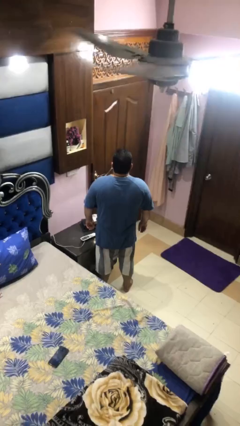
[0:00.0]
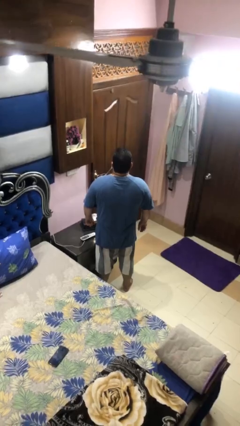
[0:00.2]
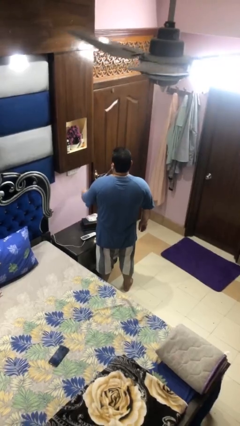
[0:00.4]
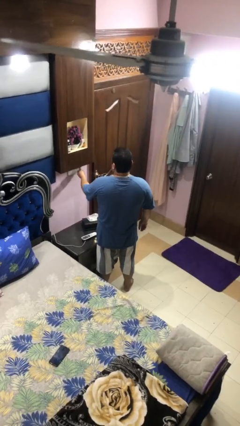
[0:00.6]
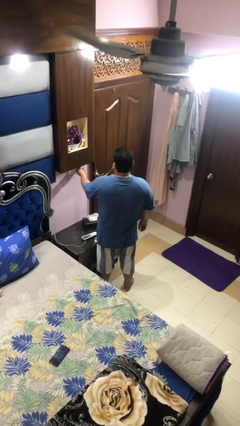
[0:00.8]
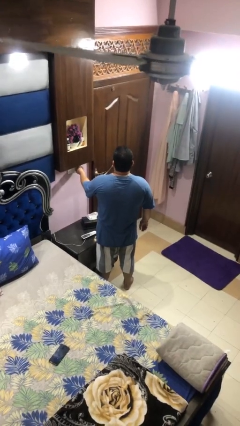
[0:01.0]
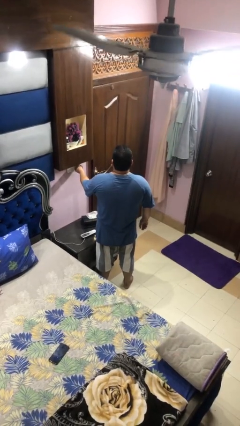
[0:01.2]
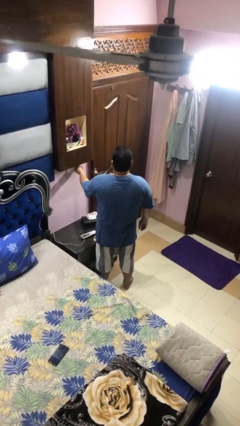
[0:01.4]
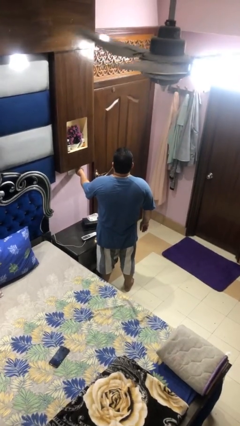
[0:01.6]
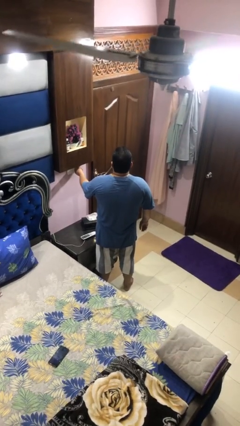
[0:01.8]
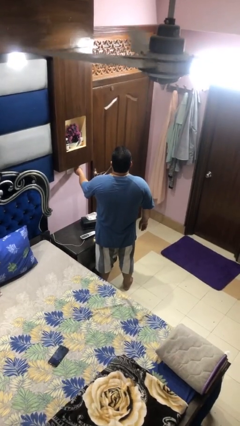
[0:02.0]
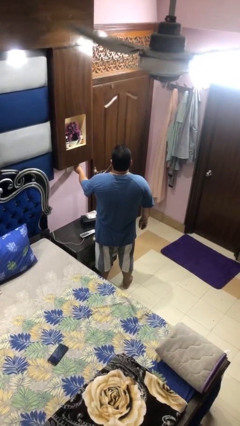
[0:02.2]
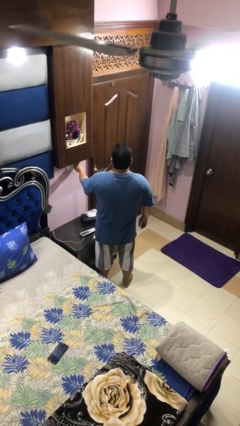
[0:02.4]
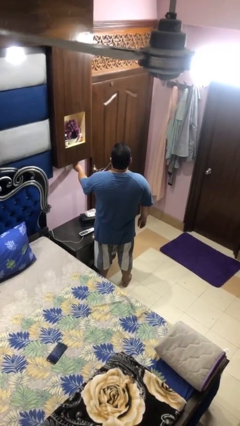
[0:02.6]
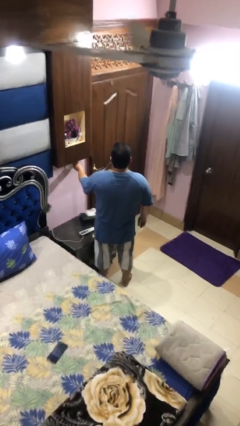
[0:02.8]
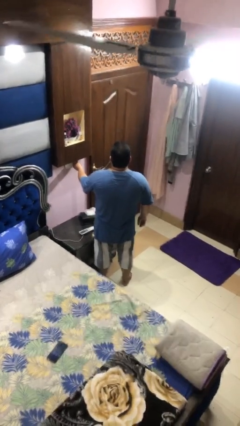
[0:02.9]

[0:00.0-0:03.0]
person turns on fan

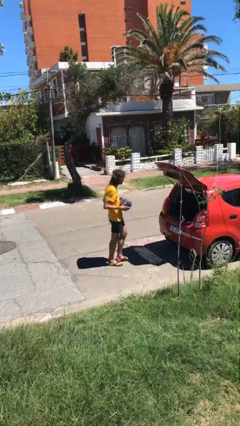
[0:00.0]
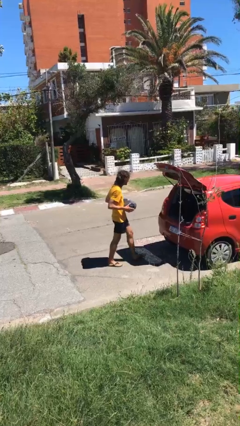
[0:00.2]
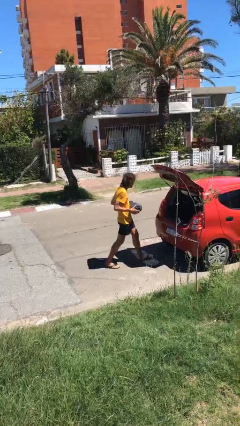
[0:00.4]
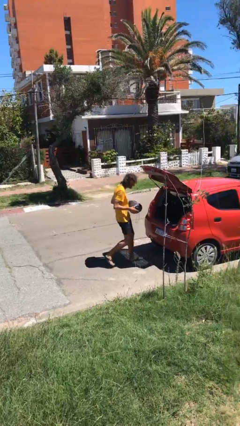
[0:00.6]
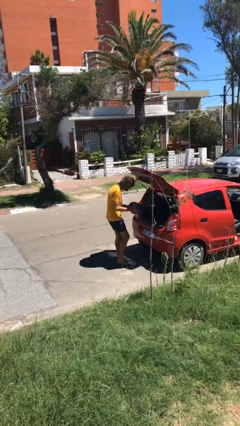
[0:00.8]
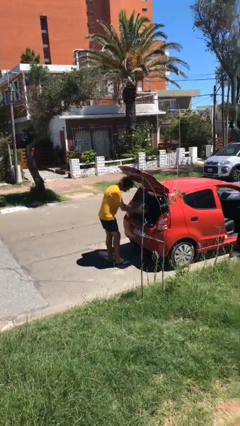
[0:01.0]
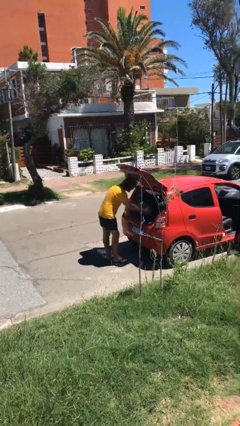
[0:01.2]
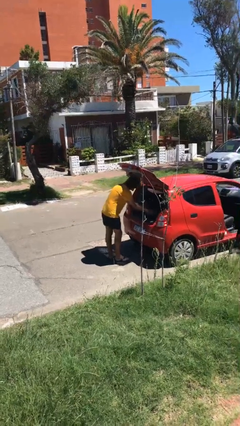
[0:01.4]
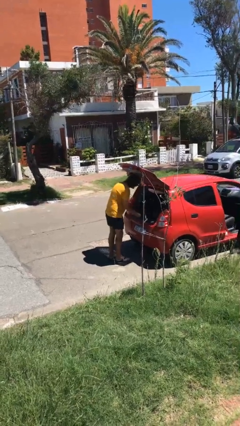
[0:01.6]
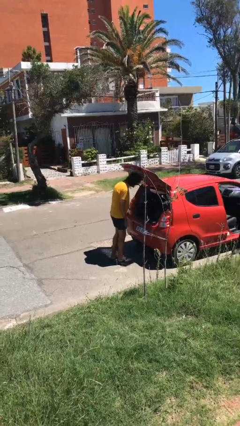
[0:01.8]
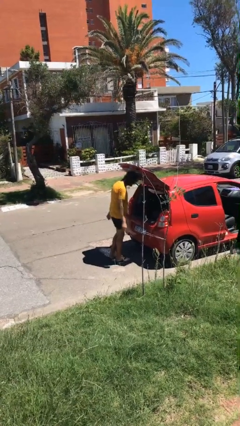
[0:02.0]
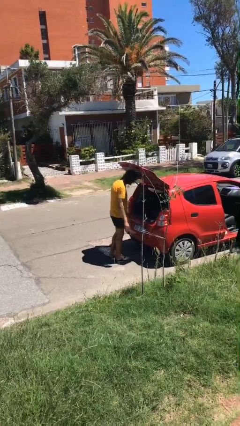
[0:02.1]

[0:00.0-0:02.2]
person loads car

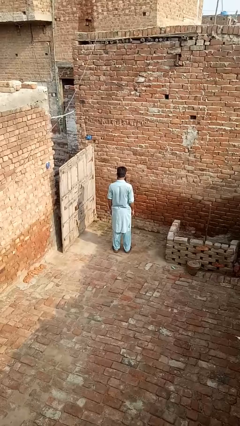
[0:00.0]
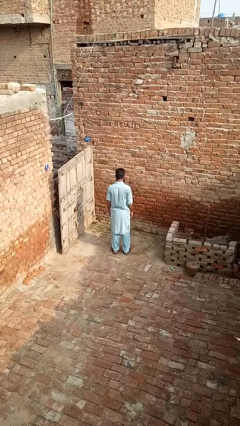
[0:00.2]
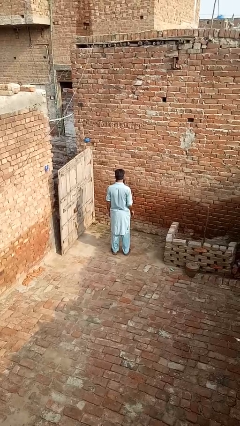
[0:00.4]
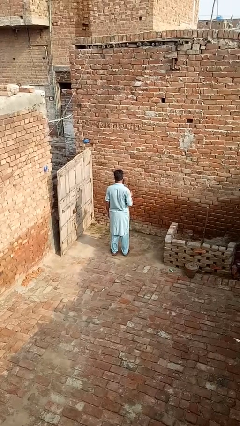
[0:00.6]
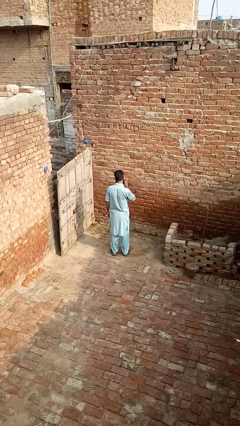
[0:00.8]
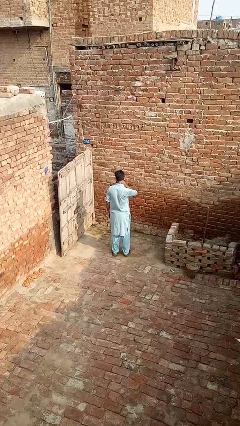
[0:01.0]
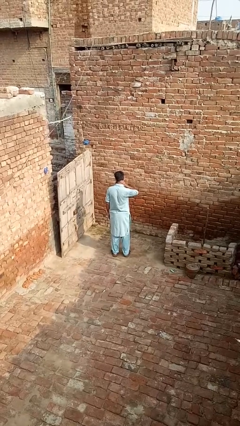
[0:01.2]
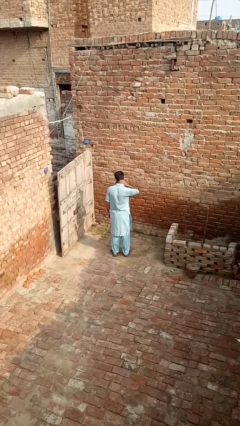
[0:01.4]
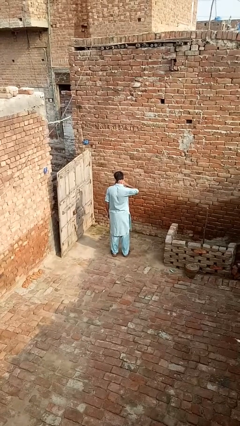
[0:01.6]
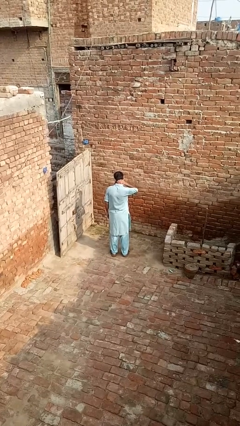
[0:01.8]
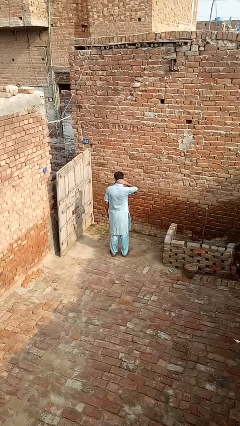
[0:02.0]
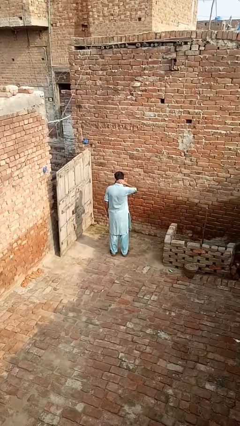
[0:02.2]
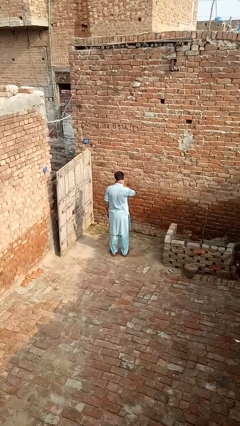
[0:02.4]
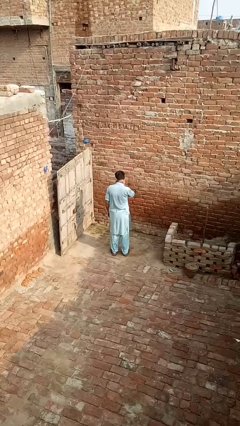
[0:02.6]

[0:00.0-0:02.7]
person rubs neck

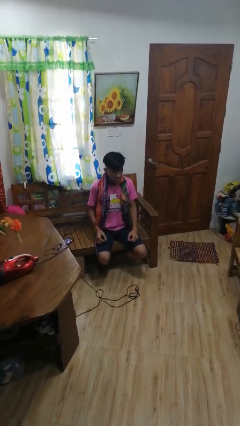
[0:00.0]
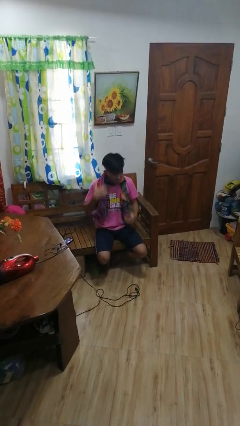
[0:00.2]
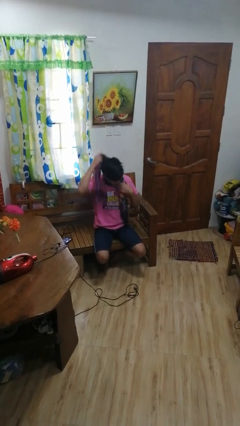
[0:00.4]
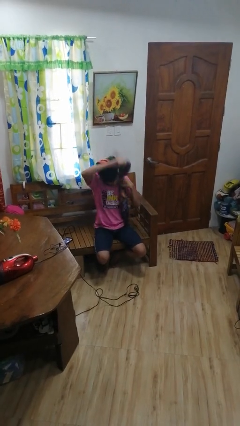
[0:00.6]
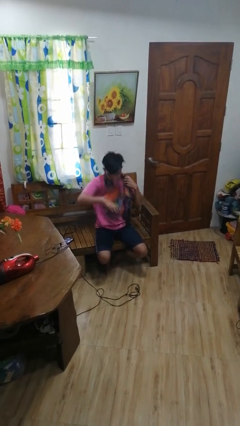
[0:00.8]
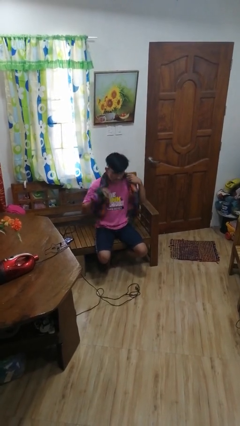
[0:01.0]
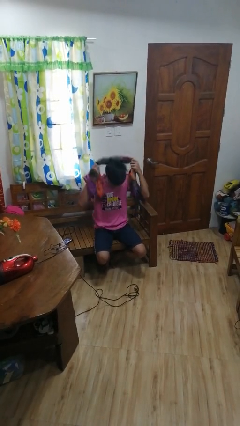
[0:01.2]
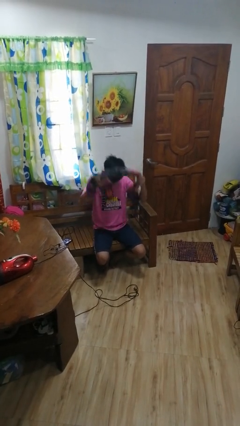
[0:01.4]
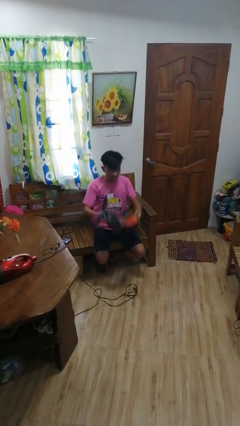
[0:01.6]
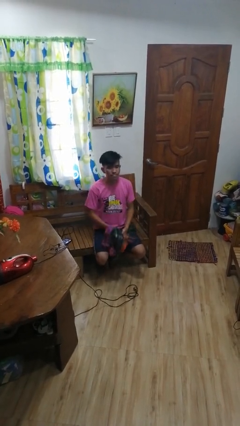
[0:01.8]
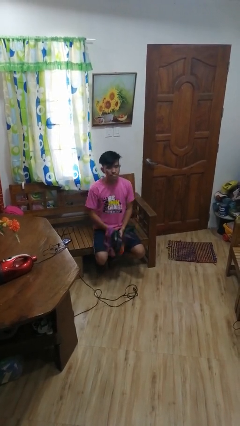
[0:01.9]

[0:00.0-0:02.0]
person takes off scarf

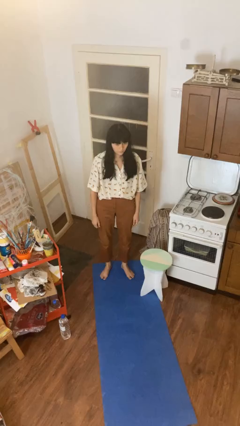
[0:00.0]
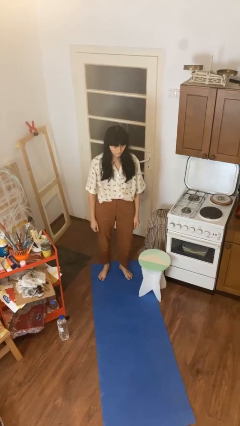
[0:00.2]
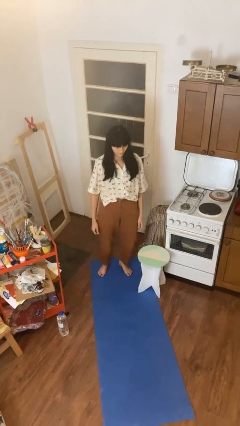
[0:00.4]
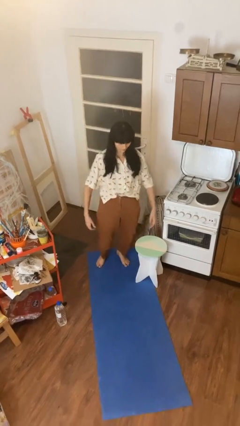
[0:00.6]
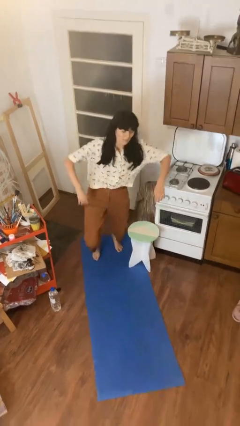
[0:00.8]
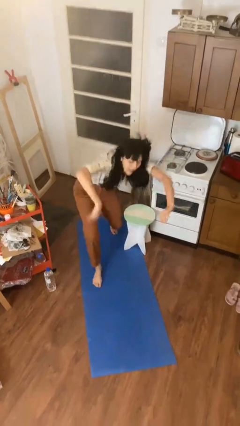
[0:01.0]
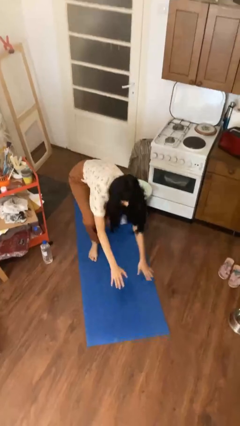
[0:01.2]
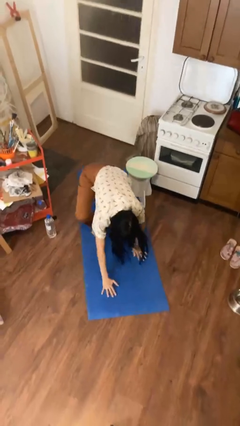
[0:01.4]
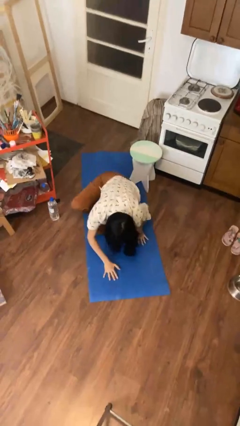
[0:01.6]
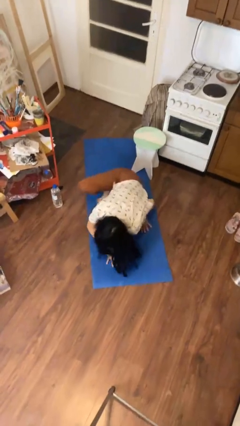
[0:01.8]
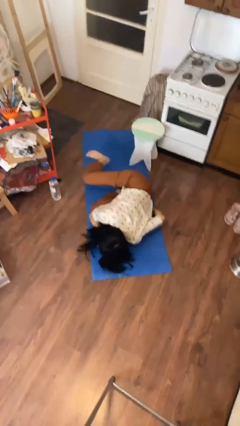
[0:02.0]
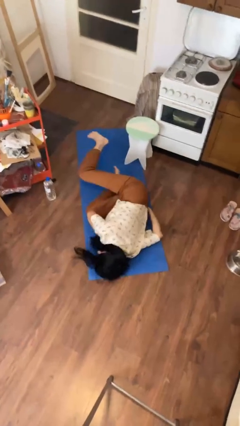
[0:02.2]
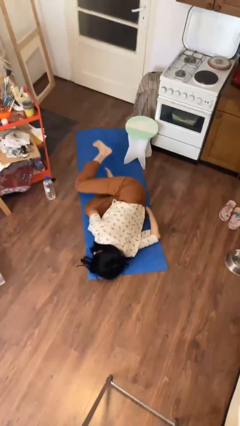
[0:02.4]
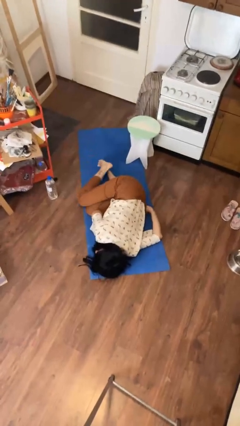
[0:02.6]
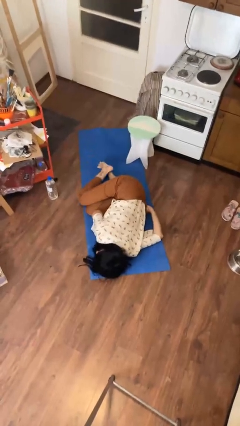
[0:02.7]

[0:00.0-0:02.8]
person trips on object on floor

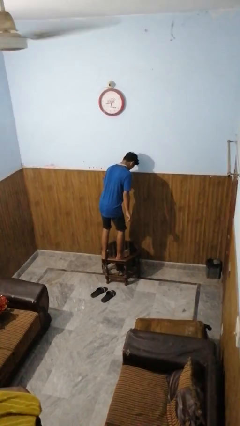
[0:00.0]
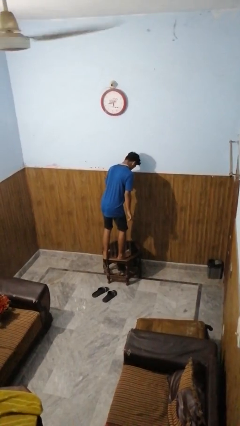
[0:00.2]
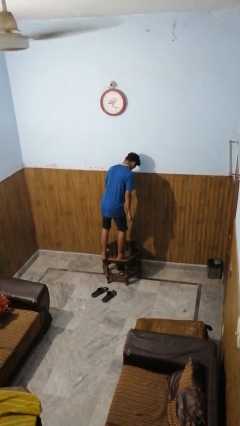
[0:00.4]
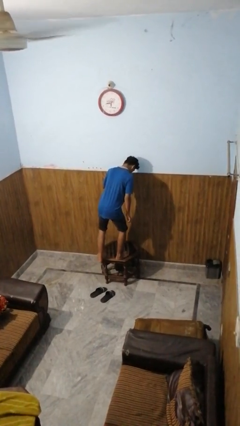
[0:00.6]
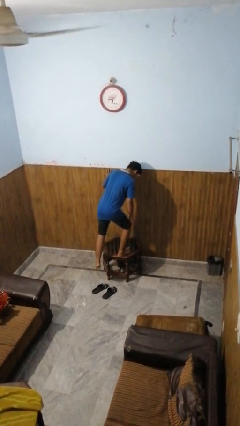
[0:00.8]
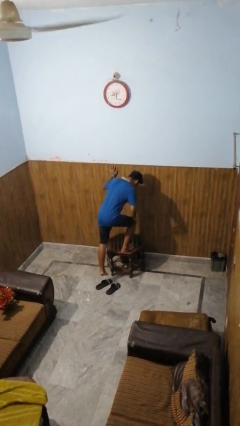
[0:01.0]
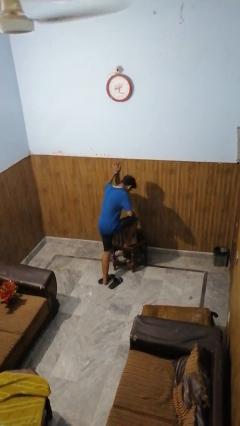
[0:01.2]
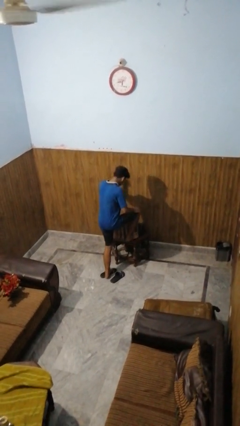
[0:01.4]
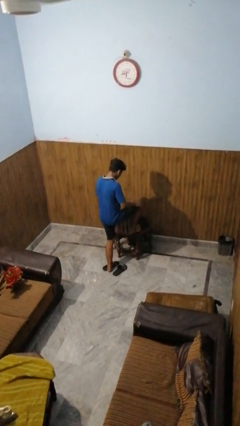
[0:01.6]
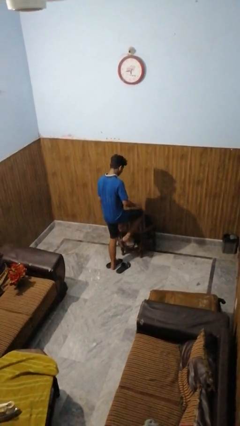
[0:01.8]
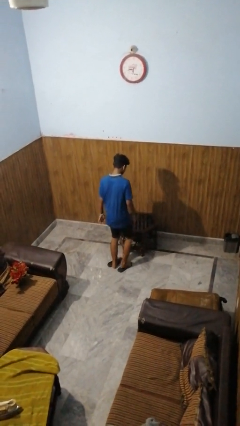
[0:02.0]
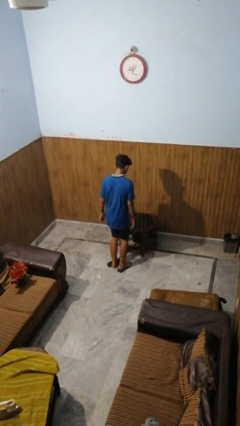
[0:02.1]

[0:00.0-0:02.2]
person climbs off table

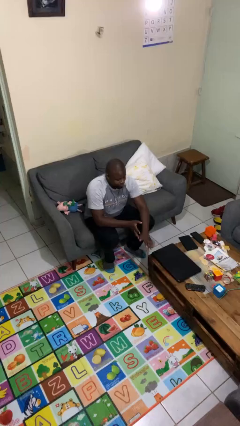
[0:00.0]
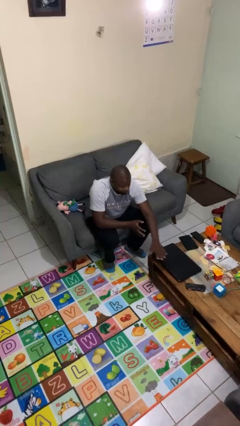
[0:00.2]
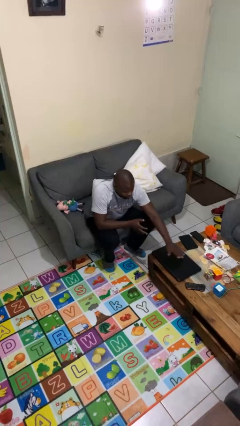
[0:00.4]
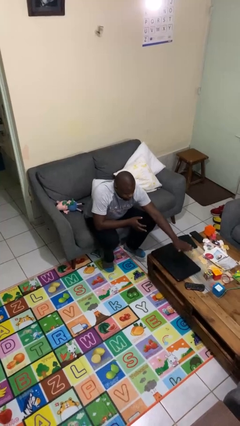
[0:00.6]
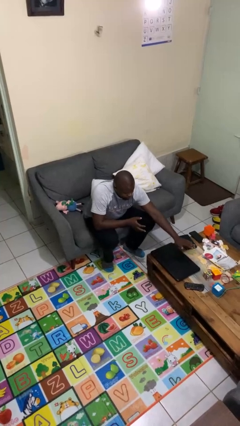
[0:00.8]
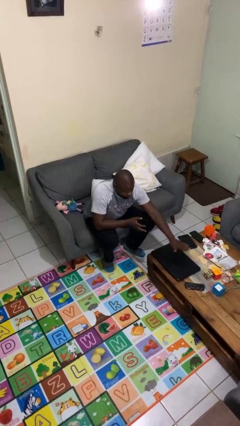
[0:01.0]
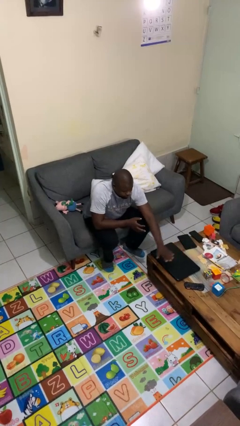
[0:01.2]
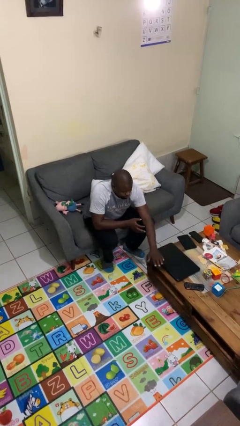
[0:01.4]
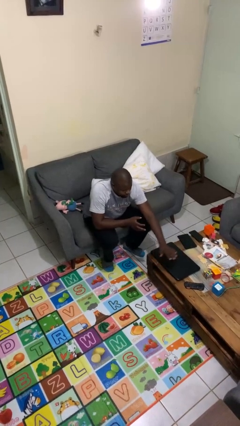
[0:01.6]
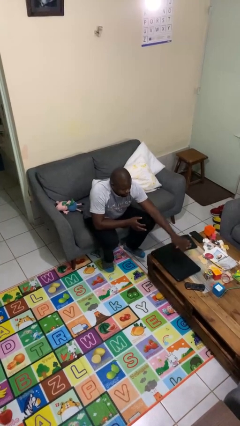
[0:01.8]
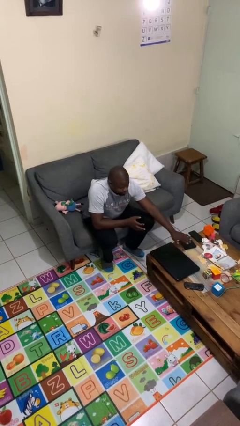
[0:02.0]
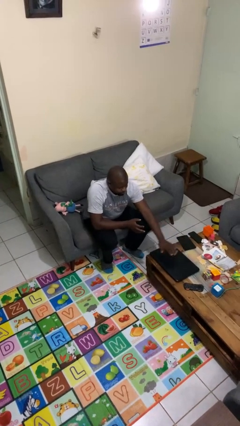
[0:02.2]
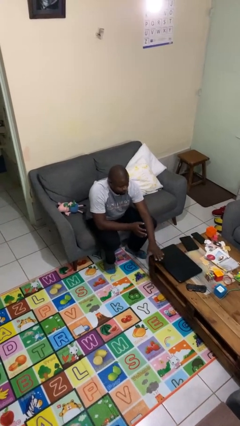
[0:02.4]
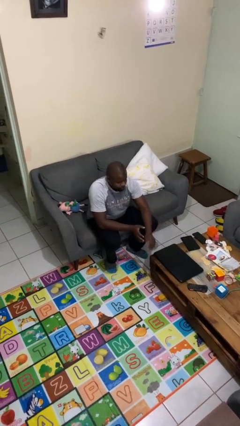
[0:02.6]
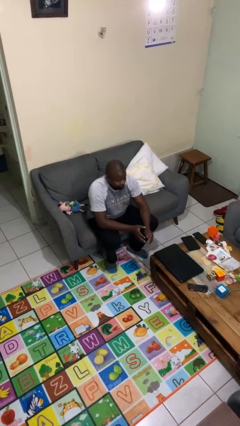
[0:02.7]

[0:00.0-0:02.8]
person waves hand over object
